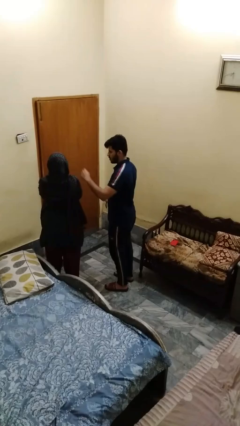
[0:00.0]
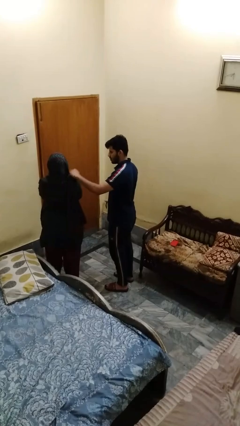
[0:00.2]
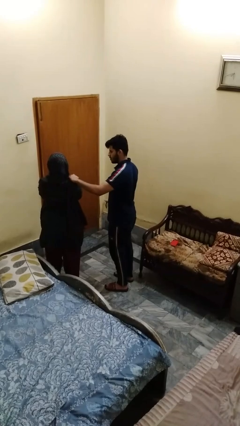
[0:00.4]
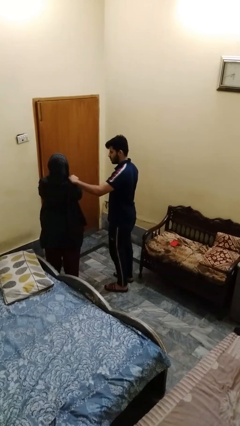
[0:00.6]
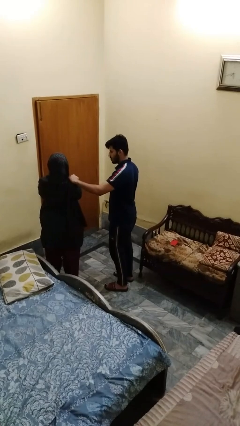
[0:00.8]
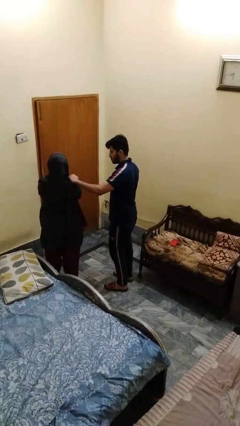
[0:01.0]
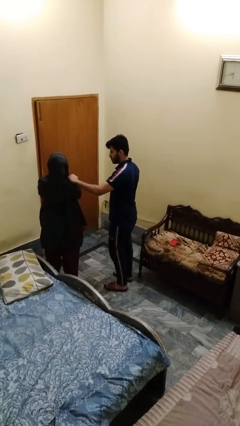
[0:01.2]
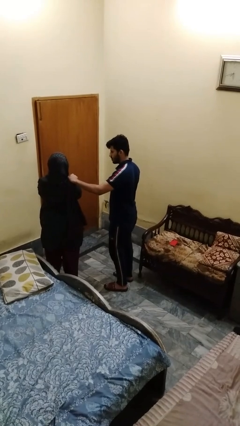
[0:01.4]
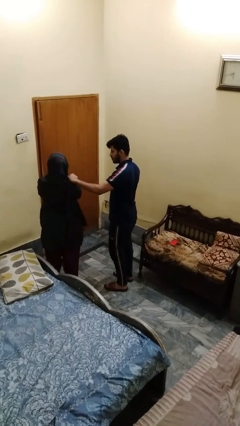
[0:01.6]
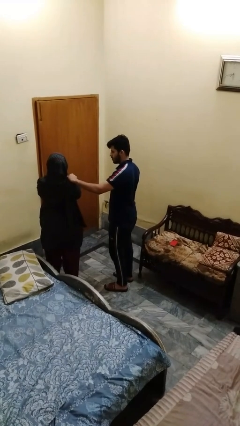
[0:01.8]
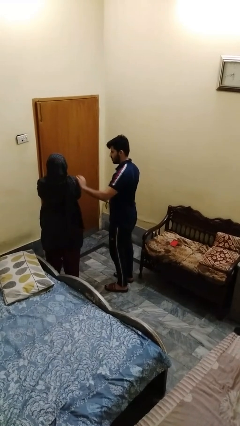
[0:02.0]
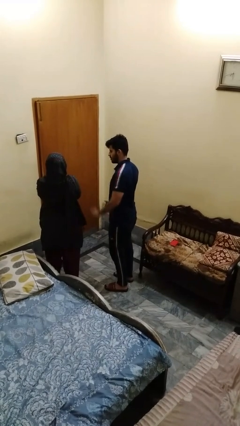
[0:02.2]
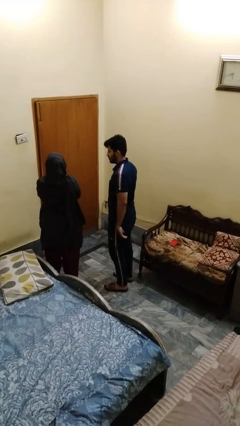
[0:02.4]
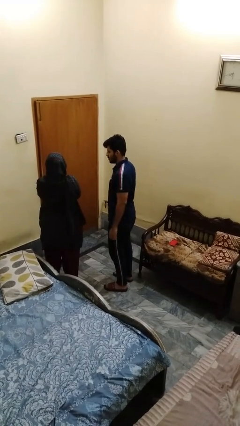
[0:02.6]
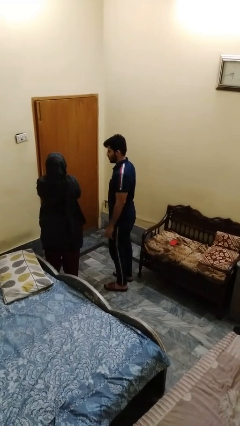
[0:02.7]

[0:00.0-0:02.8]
person pounds shoulders of person

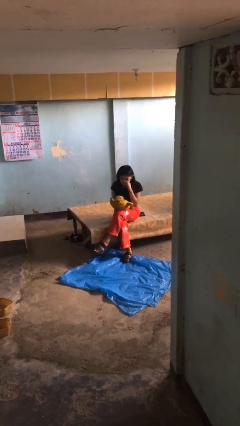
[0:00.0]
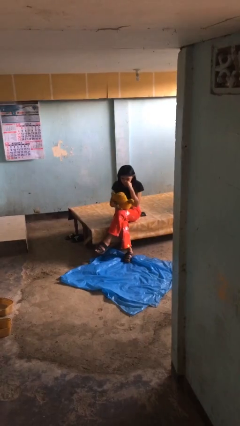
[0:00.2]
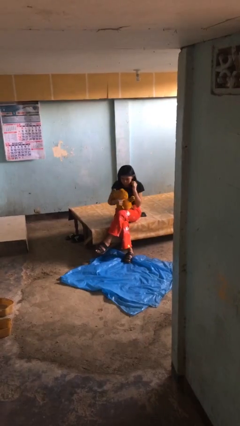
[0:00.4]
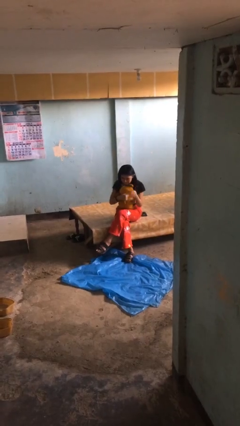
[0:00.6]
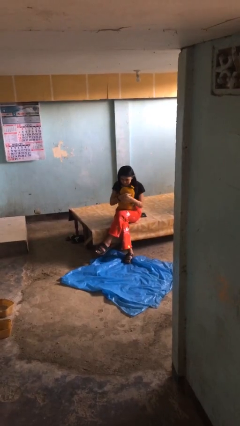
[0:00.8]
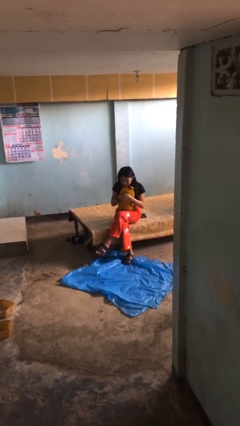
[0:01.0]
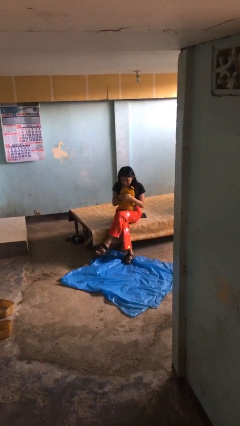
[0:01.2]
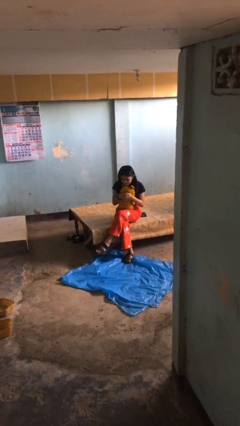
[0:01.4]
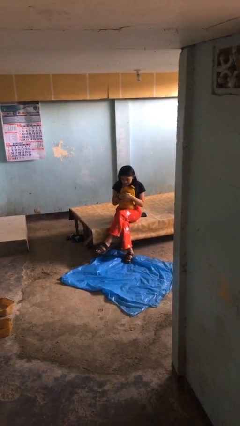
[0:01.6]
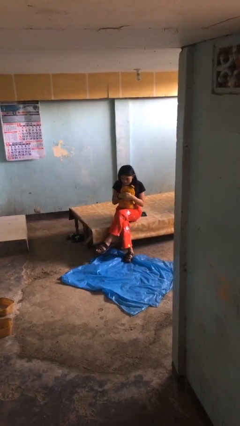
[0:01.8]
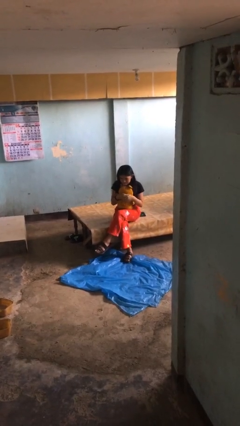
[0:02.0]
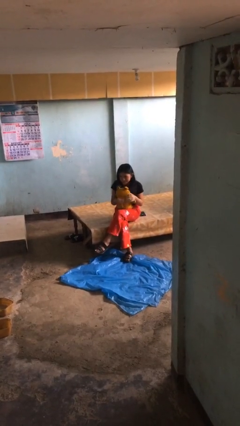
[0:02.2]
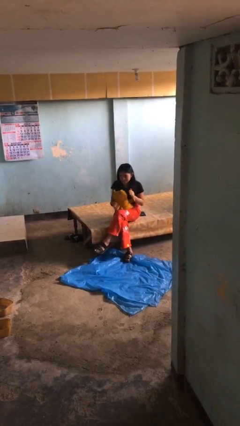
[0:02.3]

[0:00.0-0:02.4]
person hugs stuffed animal

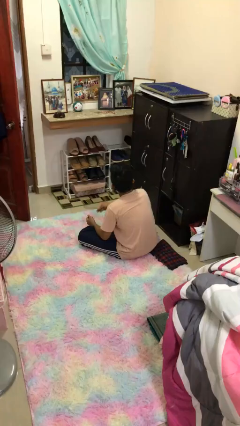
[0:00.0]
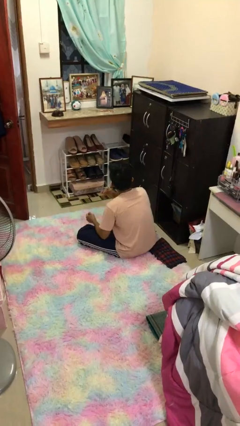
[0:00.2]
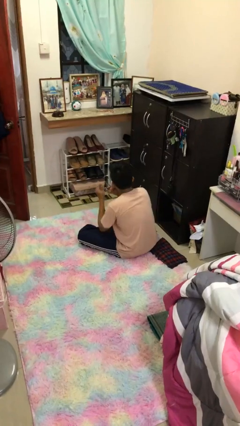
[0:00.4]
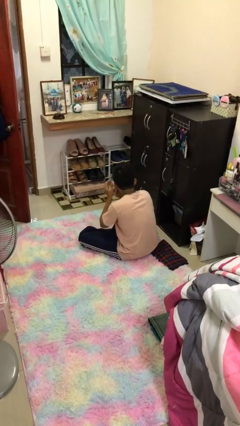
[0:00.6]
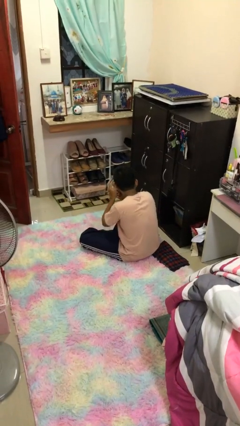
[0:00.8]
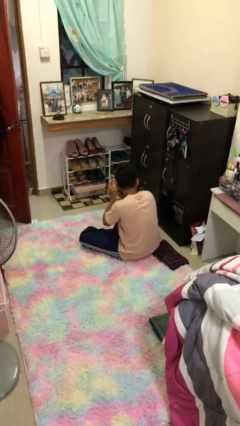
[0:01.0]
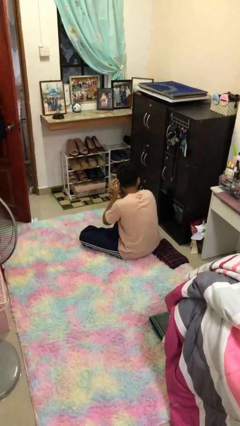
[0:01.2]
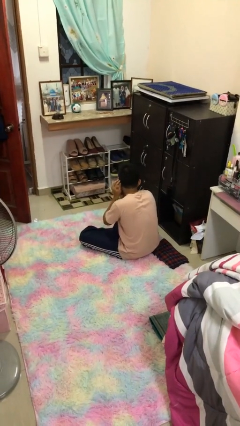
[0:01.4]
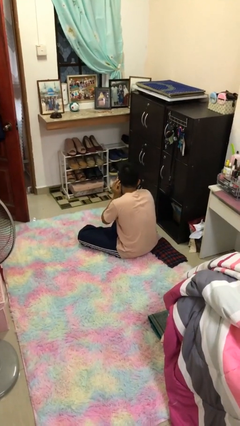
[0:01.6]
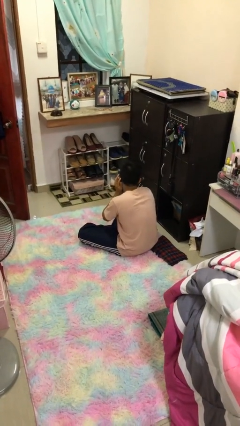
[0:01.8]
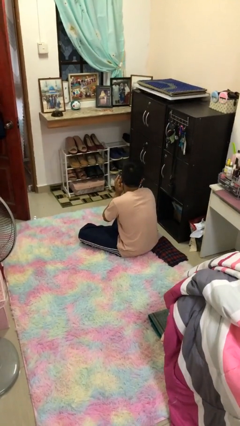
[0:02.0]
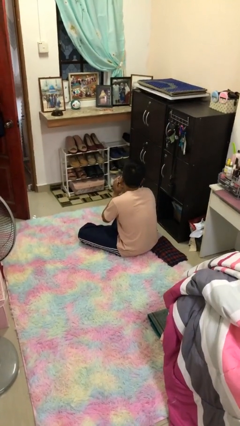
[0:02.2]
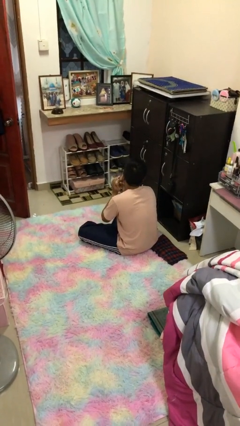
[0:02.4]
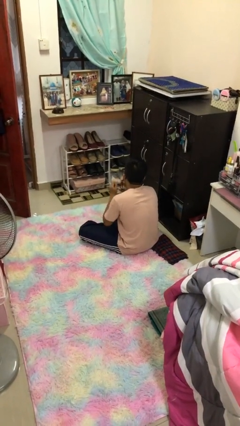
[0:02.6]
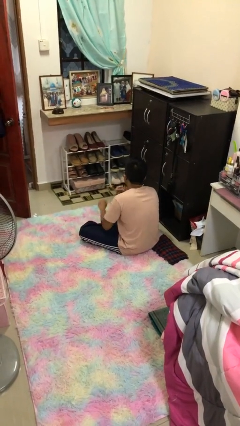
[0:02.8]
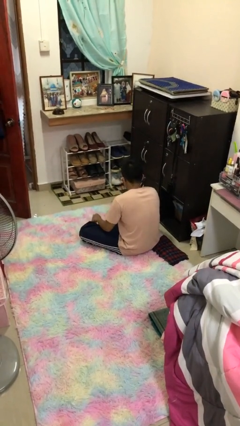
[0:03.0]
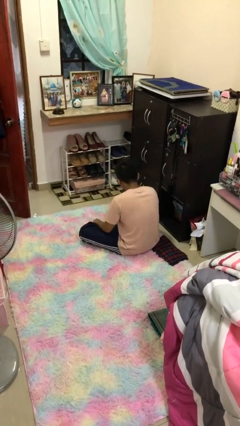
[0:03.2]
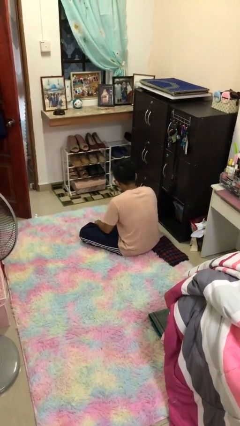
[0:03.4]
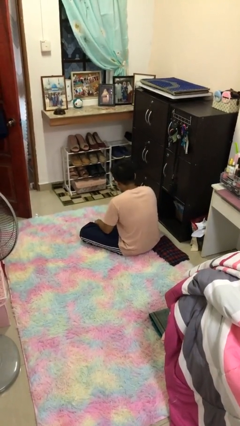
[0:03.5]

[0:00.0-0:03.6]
person puts on earrings

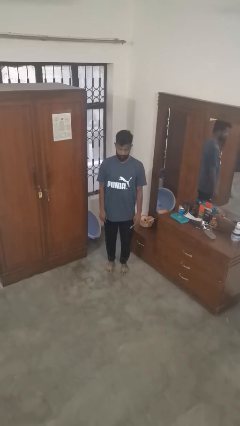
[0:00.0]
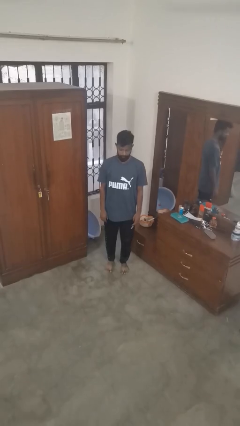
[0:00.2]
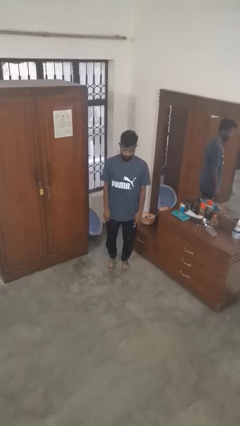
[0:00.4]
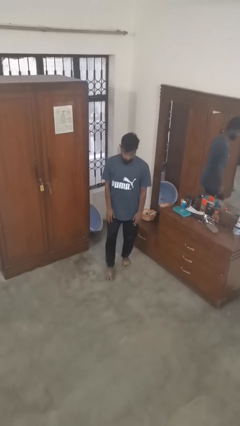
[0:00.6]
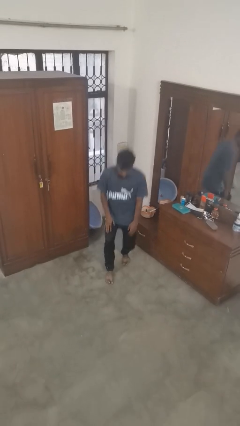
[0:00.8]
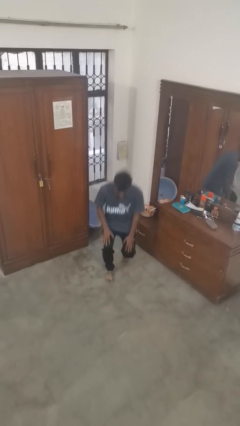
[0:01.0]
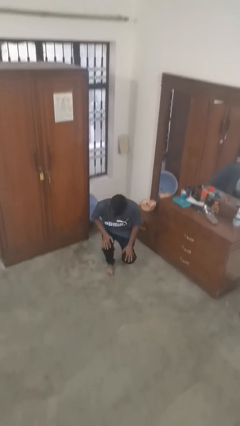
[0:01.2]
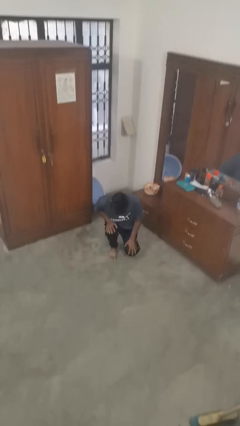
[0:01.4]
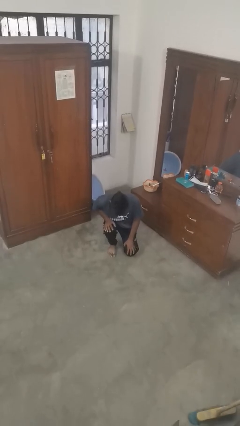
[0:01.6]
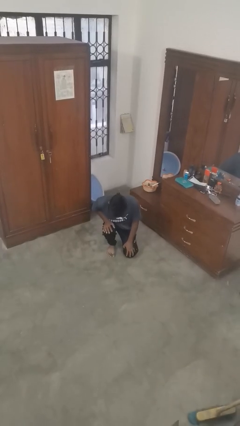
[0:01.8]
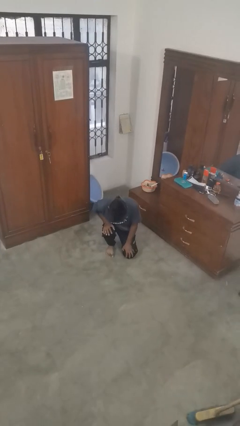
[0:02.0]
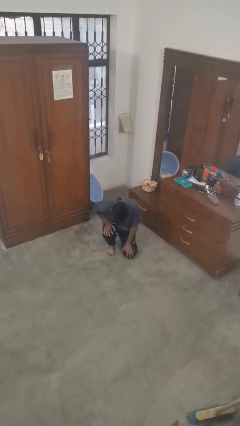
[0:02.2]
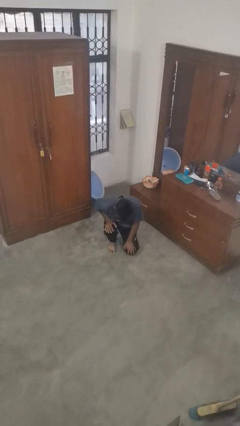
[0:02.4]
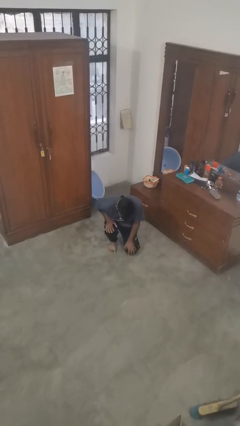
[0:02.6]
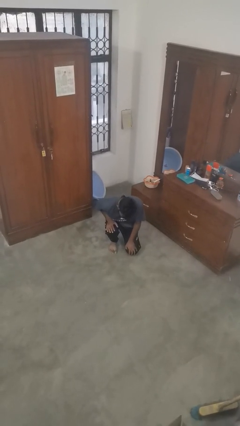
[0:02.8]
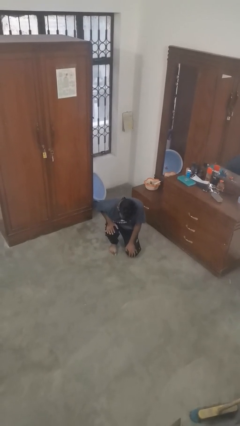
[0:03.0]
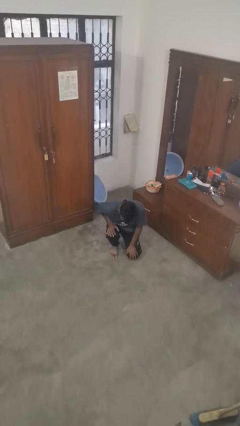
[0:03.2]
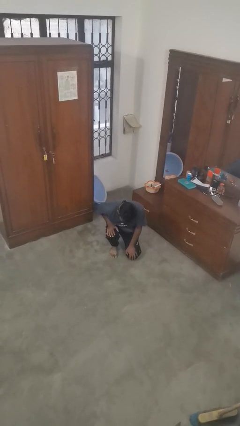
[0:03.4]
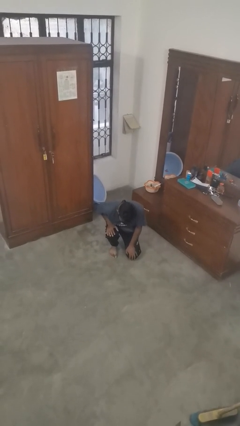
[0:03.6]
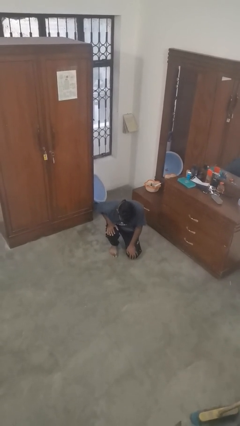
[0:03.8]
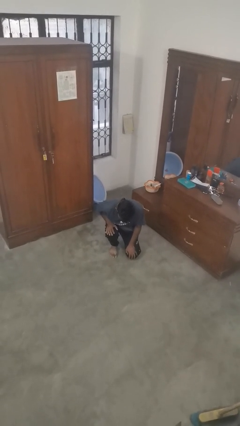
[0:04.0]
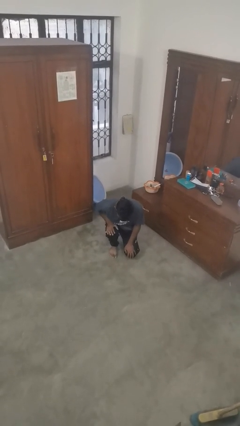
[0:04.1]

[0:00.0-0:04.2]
person kneels

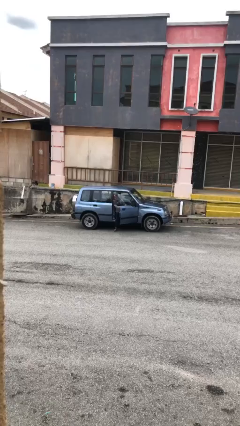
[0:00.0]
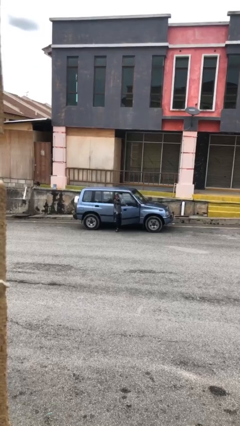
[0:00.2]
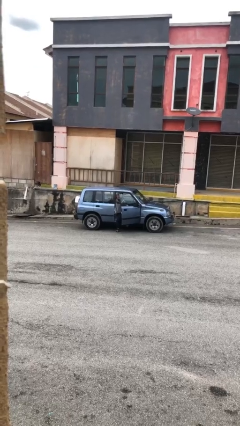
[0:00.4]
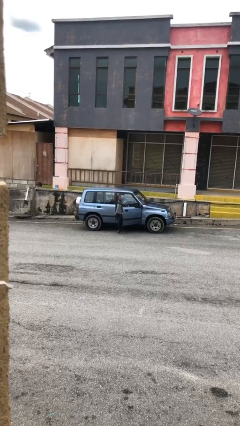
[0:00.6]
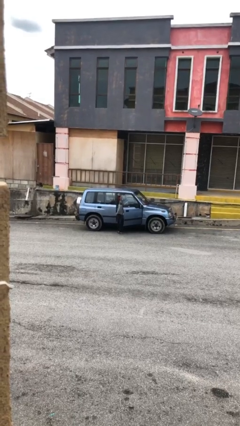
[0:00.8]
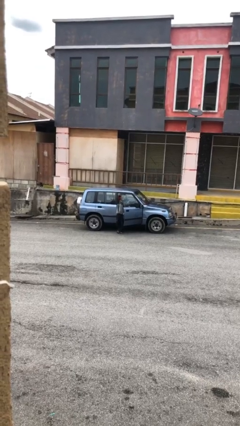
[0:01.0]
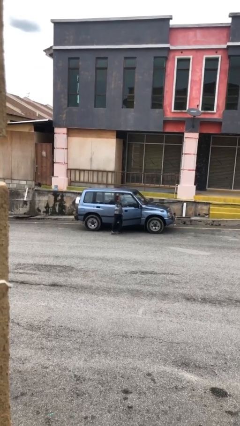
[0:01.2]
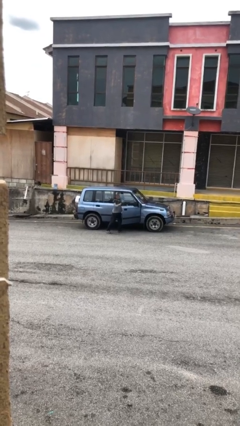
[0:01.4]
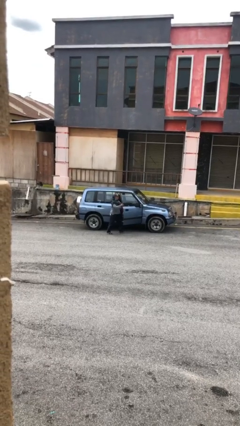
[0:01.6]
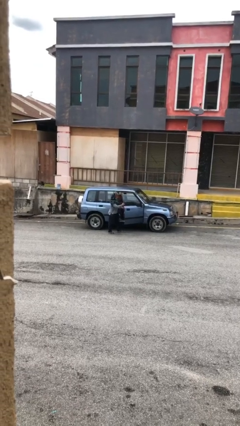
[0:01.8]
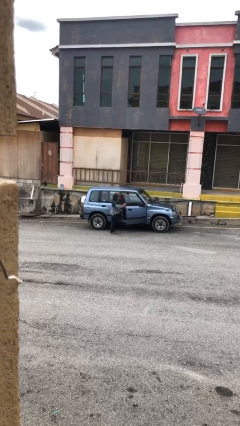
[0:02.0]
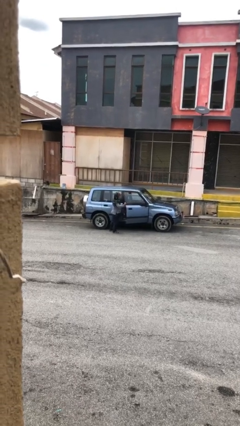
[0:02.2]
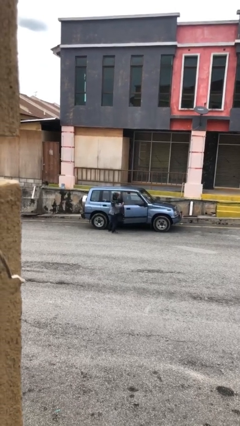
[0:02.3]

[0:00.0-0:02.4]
person exits car

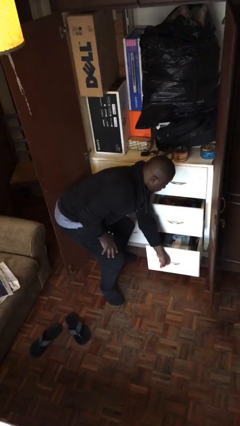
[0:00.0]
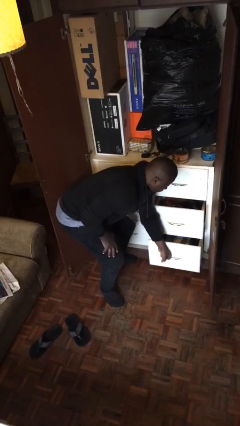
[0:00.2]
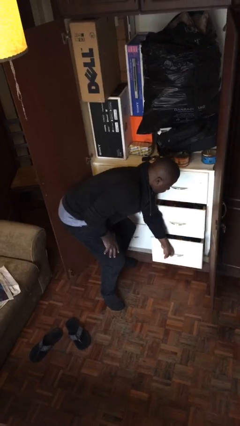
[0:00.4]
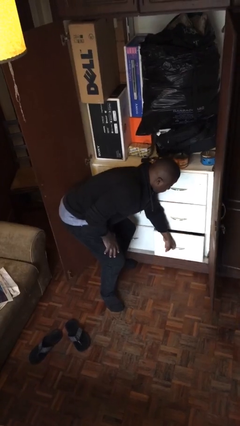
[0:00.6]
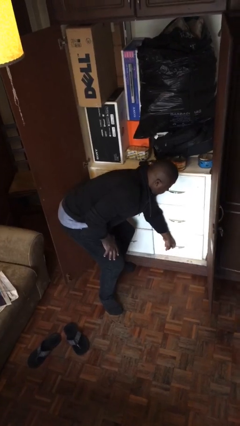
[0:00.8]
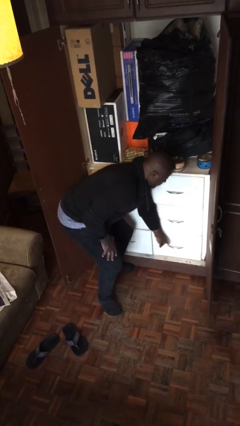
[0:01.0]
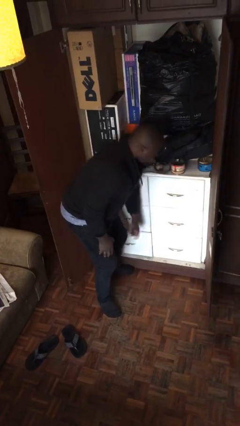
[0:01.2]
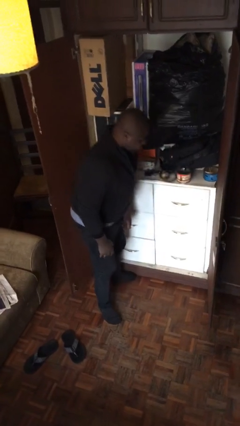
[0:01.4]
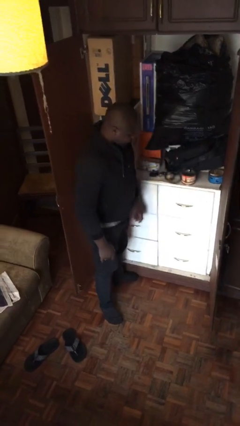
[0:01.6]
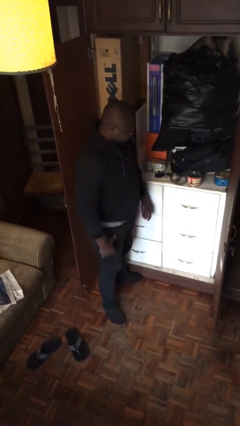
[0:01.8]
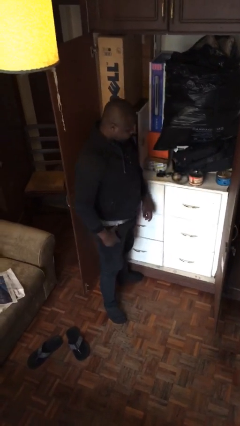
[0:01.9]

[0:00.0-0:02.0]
person closes dresser drawer
